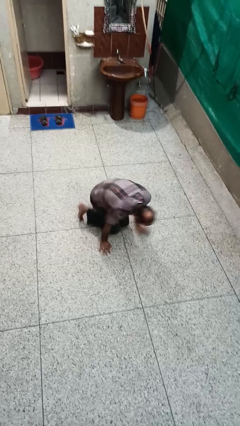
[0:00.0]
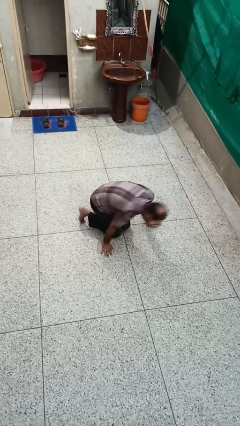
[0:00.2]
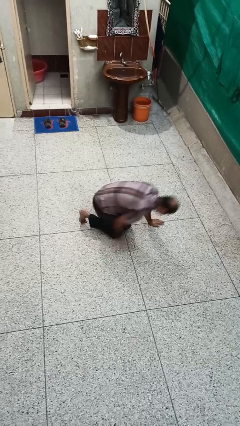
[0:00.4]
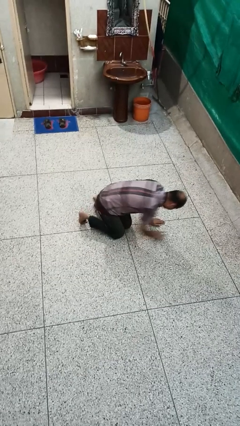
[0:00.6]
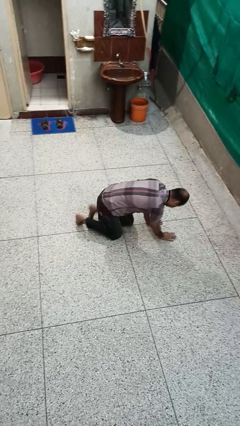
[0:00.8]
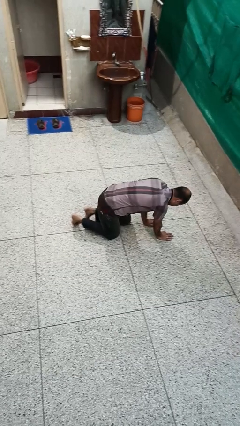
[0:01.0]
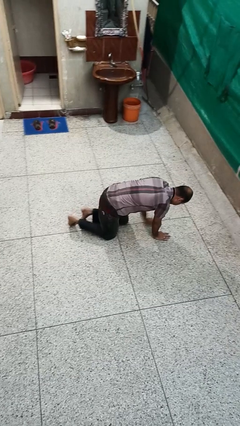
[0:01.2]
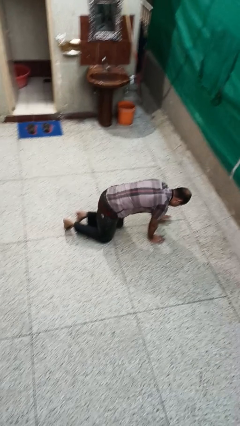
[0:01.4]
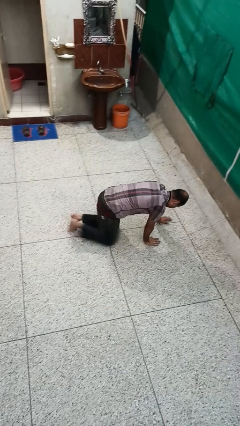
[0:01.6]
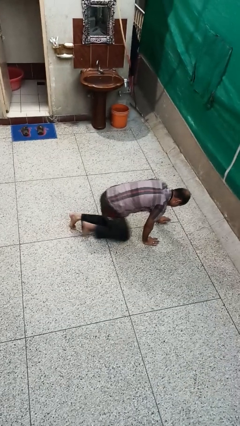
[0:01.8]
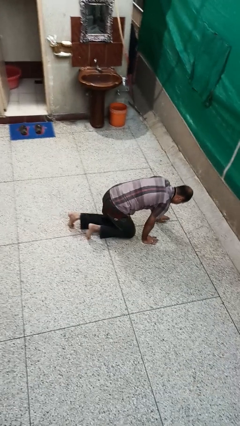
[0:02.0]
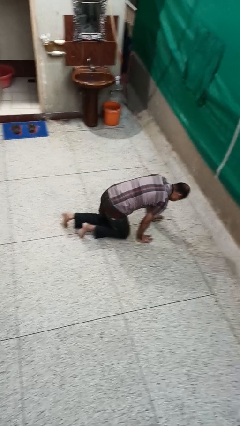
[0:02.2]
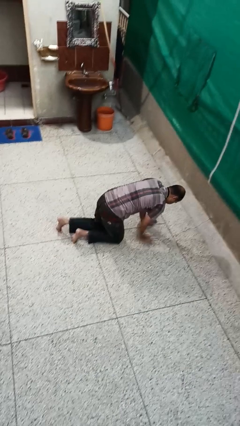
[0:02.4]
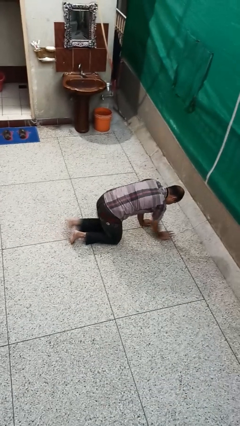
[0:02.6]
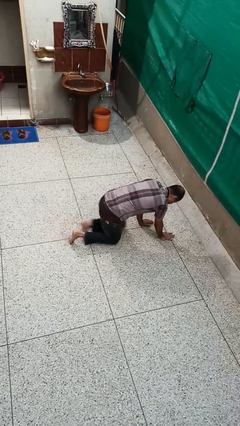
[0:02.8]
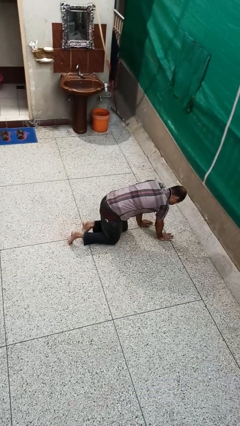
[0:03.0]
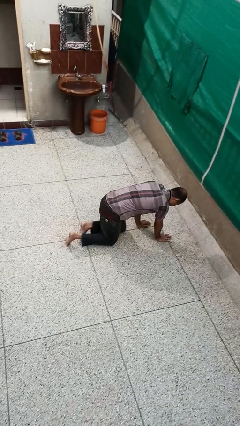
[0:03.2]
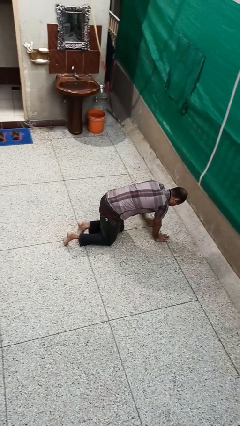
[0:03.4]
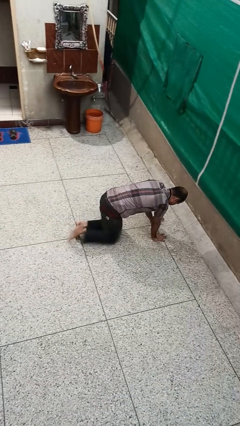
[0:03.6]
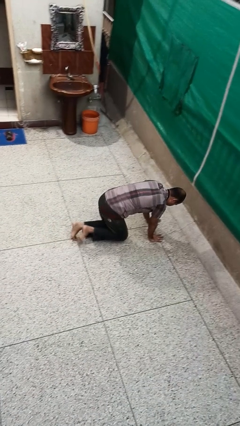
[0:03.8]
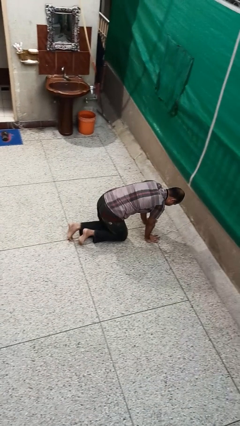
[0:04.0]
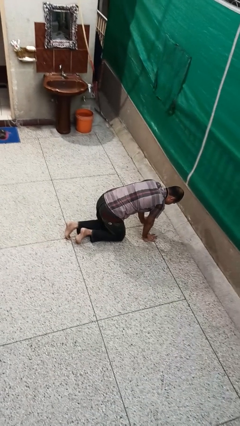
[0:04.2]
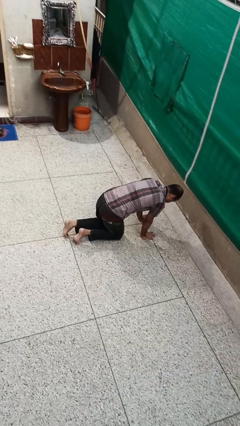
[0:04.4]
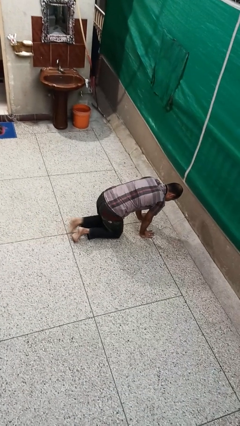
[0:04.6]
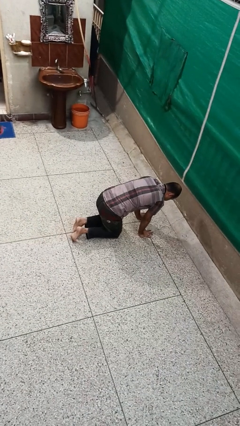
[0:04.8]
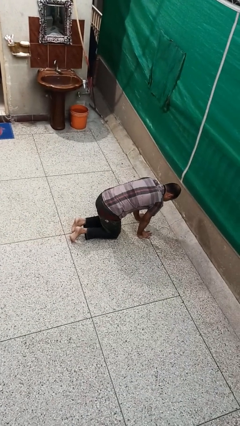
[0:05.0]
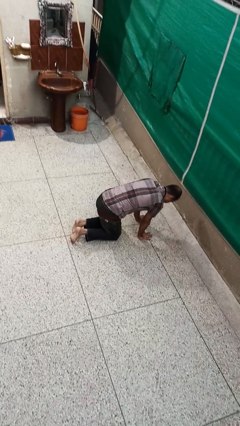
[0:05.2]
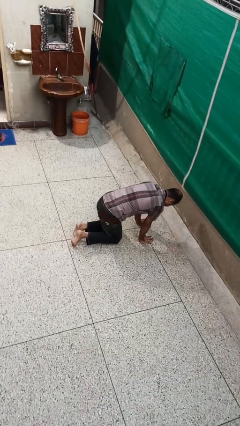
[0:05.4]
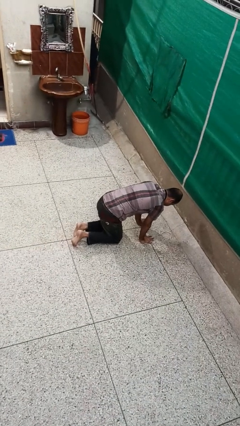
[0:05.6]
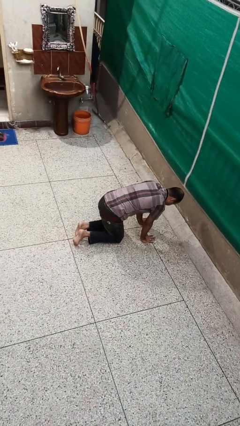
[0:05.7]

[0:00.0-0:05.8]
person crawls

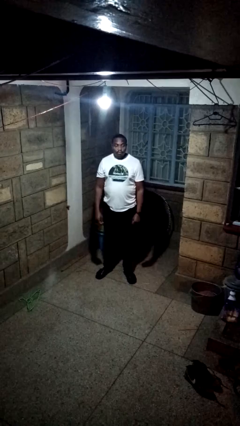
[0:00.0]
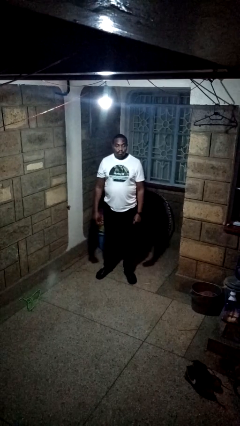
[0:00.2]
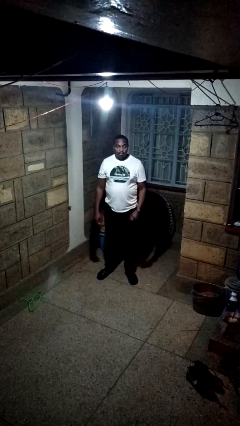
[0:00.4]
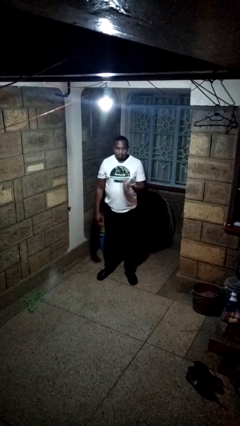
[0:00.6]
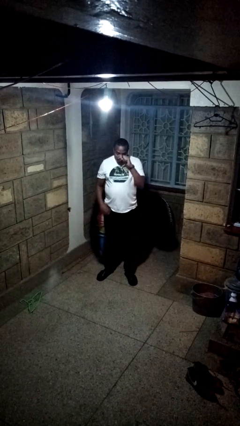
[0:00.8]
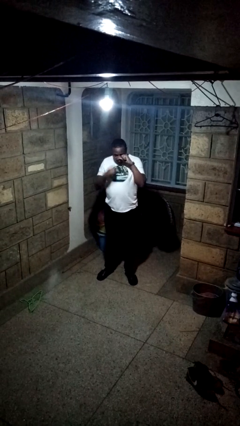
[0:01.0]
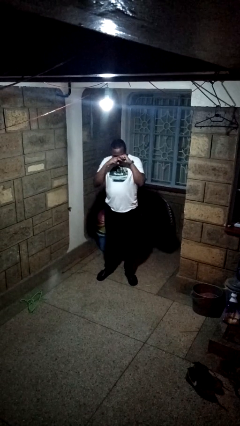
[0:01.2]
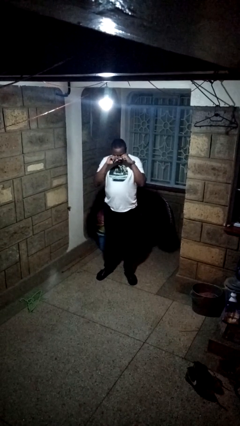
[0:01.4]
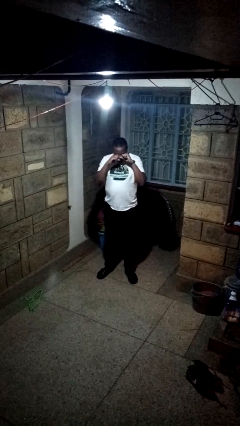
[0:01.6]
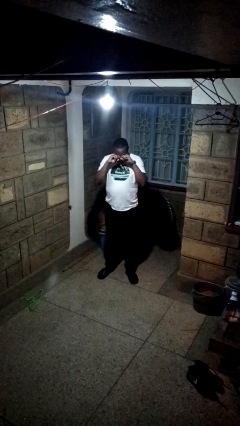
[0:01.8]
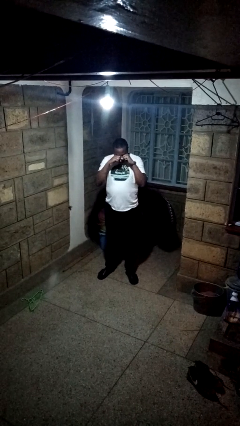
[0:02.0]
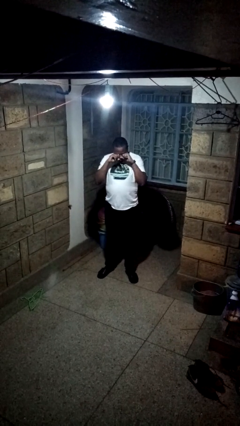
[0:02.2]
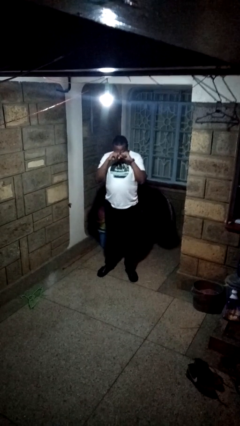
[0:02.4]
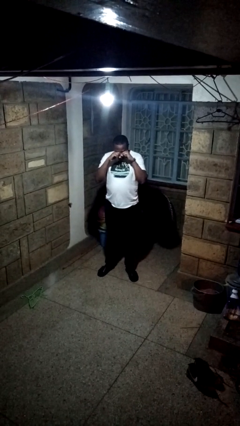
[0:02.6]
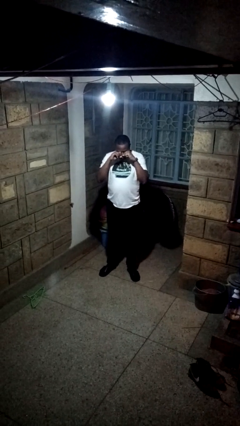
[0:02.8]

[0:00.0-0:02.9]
person rubs eyes

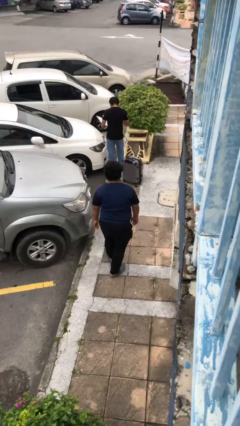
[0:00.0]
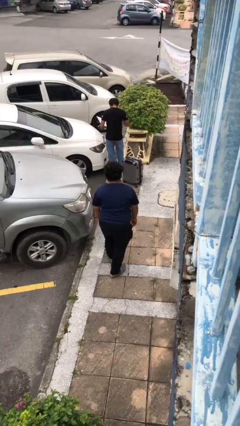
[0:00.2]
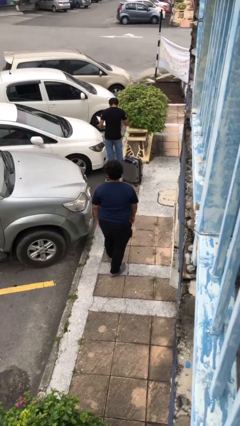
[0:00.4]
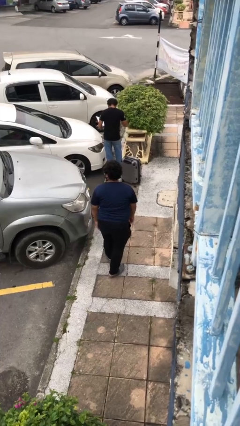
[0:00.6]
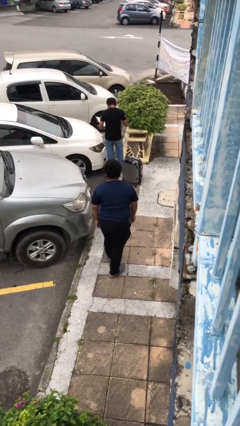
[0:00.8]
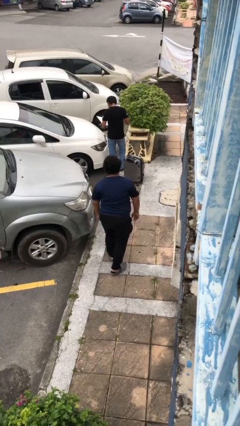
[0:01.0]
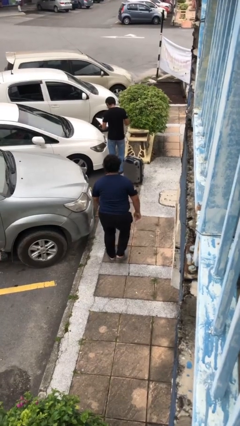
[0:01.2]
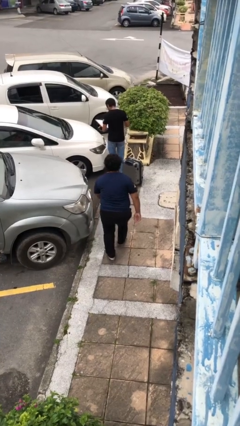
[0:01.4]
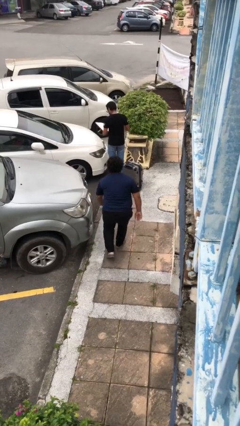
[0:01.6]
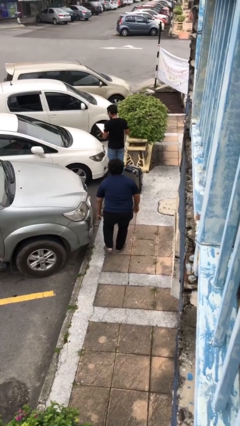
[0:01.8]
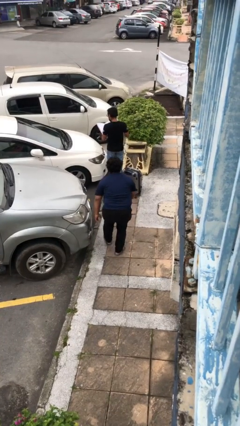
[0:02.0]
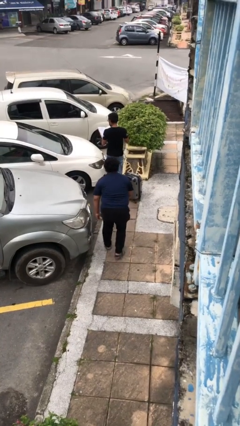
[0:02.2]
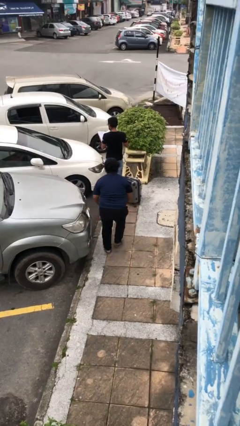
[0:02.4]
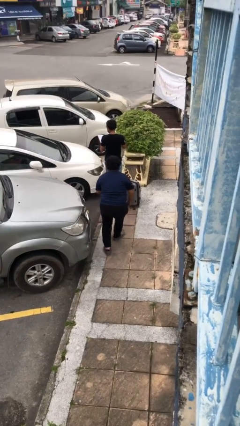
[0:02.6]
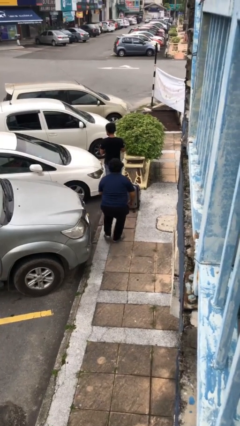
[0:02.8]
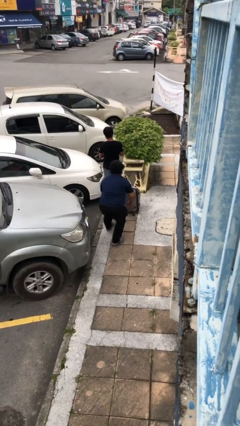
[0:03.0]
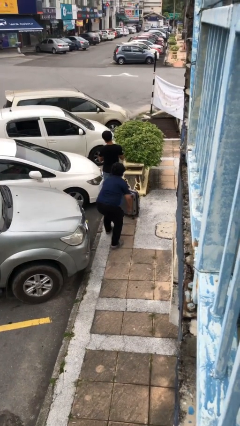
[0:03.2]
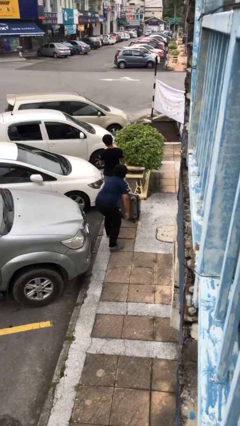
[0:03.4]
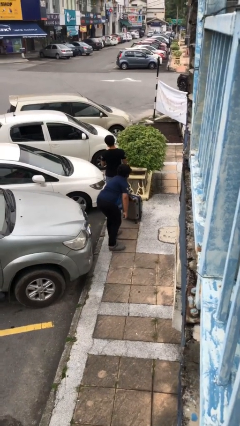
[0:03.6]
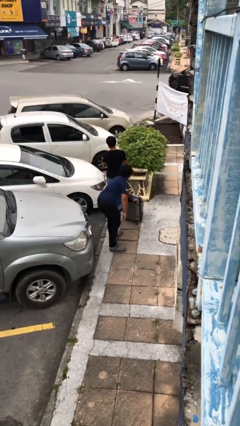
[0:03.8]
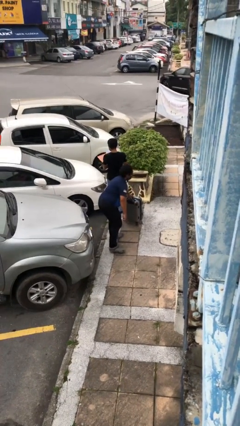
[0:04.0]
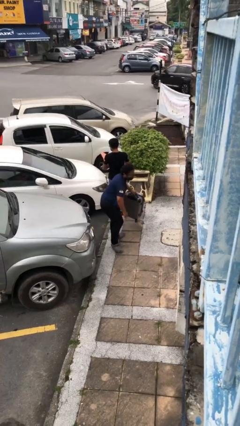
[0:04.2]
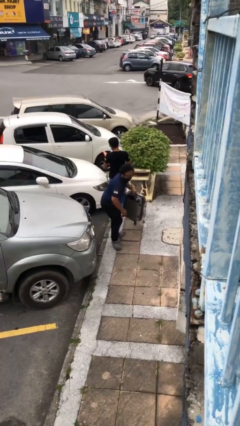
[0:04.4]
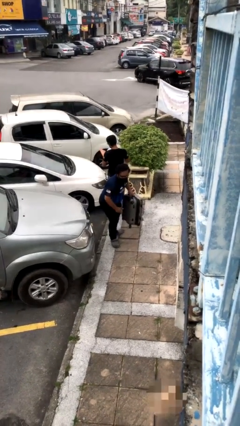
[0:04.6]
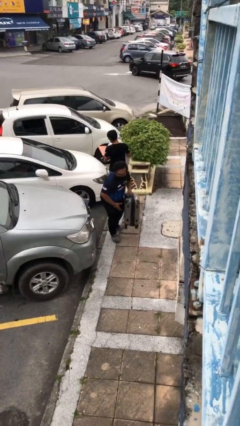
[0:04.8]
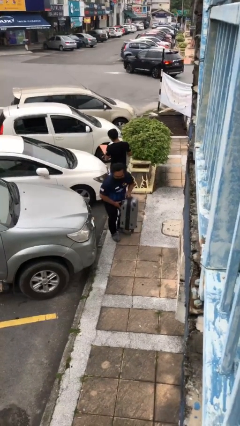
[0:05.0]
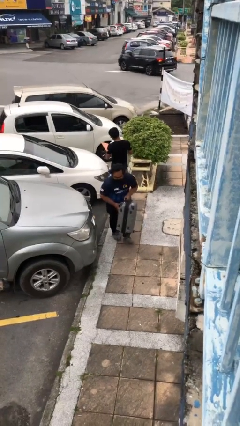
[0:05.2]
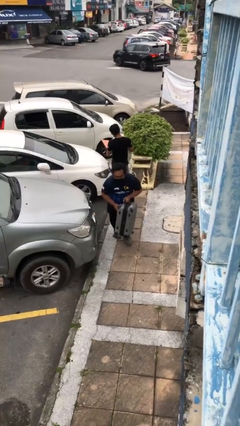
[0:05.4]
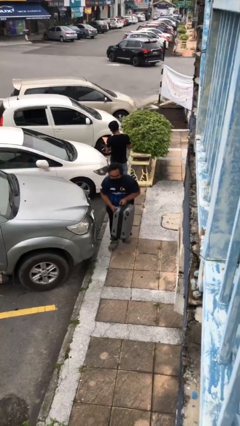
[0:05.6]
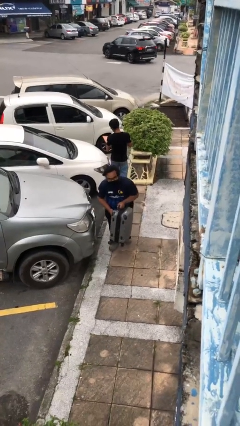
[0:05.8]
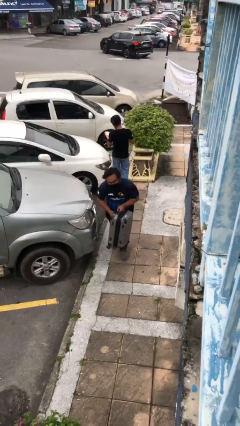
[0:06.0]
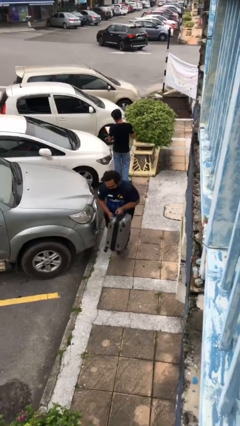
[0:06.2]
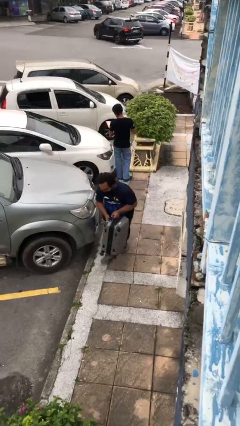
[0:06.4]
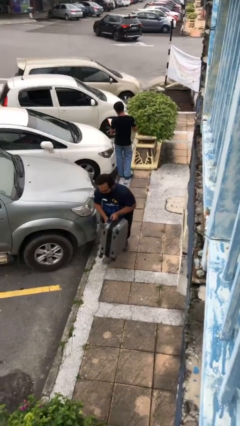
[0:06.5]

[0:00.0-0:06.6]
person steals object from person

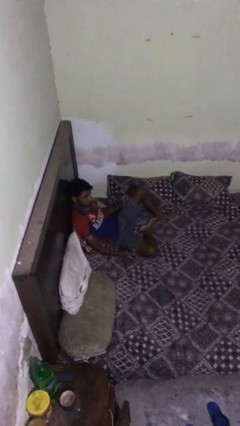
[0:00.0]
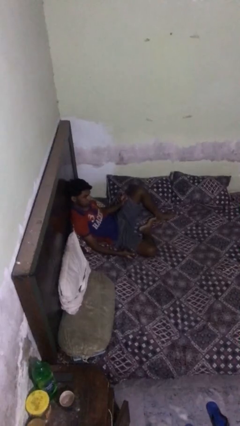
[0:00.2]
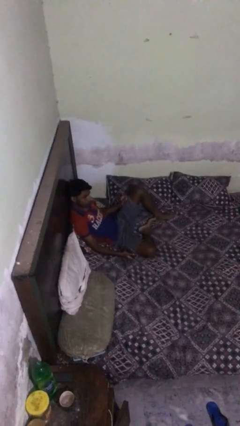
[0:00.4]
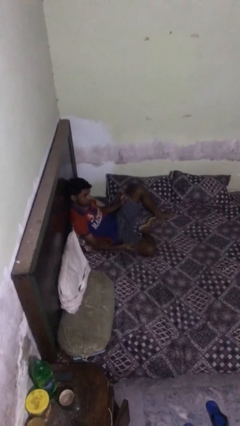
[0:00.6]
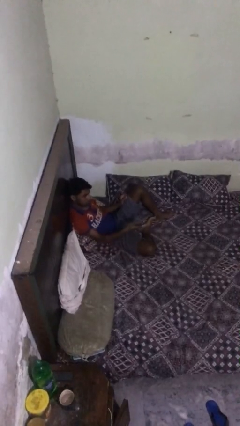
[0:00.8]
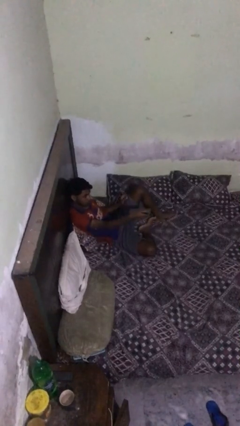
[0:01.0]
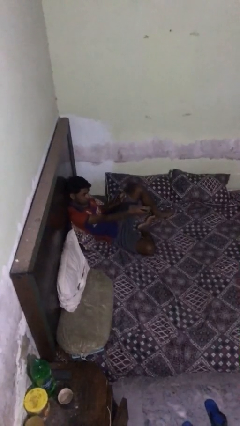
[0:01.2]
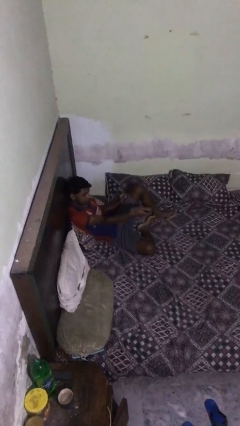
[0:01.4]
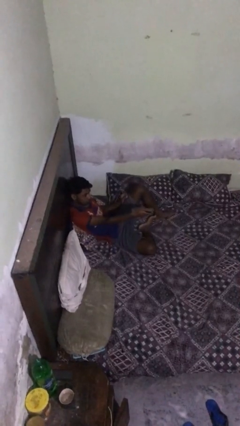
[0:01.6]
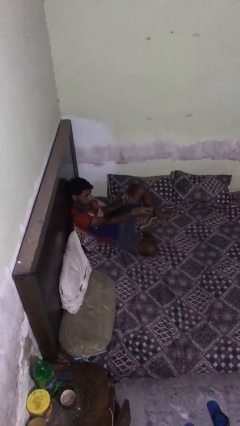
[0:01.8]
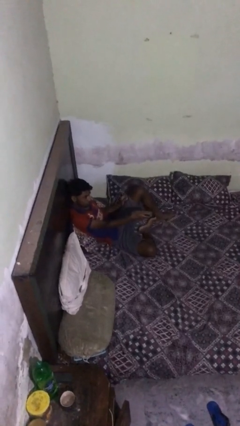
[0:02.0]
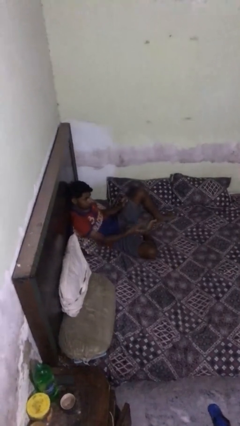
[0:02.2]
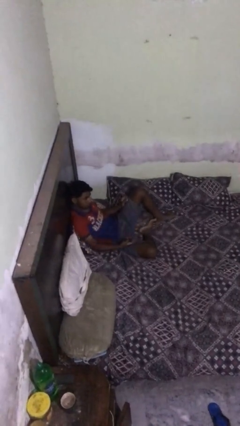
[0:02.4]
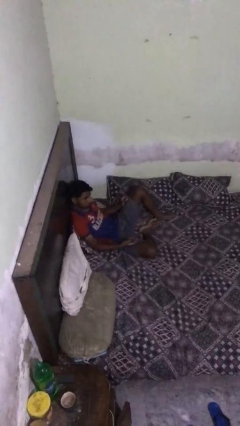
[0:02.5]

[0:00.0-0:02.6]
person uses television remote
